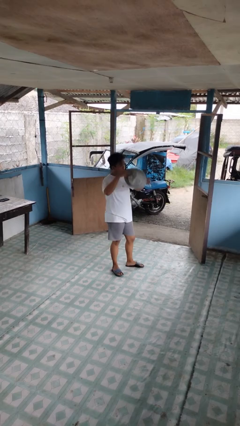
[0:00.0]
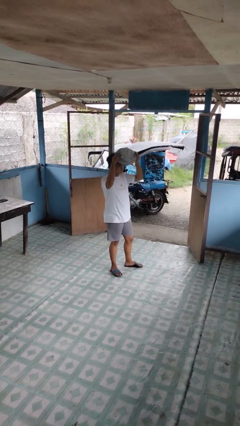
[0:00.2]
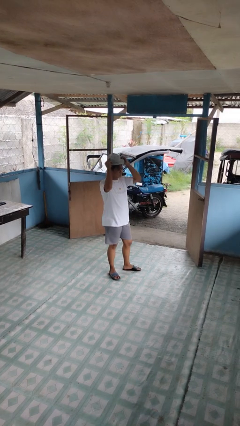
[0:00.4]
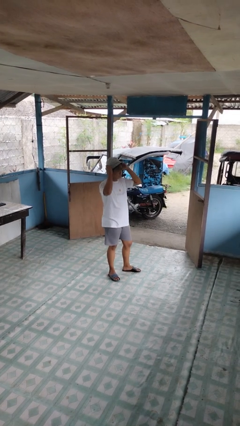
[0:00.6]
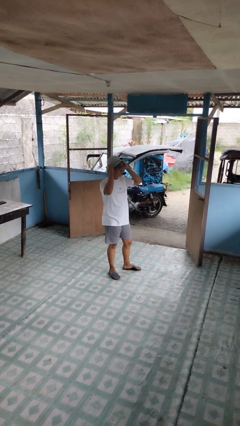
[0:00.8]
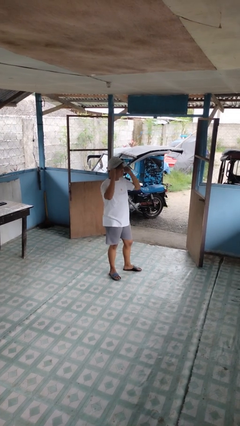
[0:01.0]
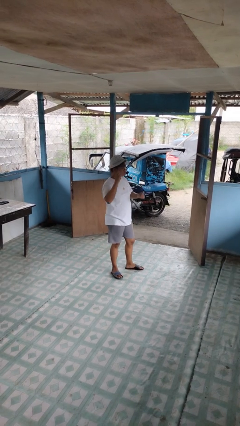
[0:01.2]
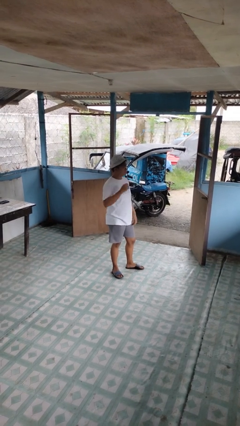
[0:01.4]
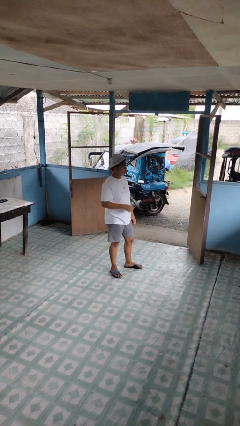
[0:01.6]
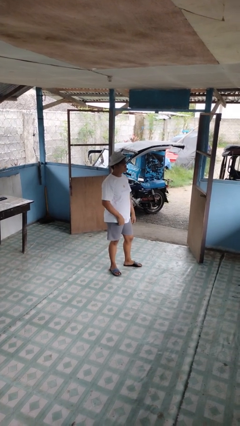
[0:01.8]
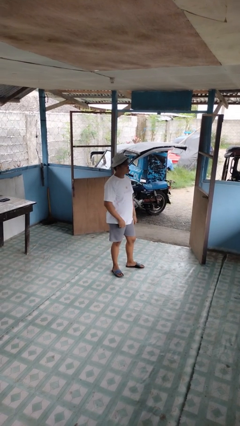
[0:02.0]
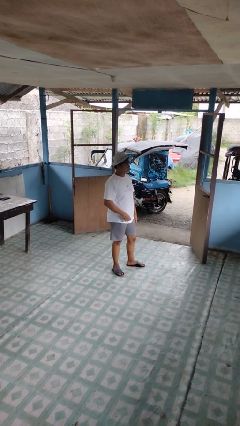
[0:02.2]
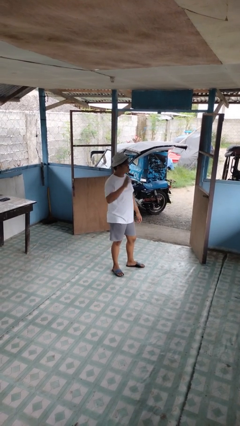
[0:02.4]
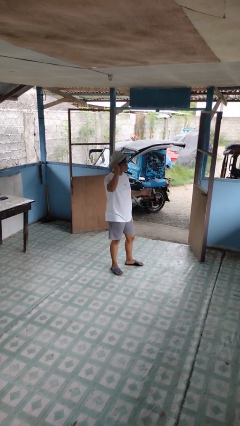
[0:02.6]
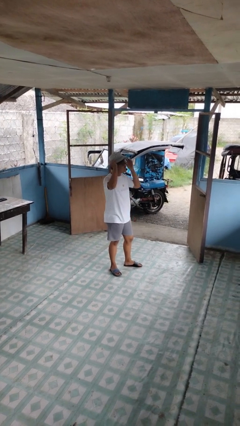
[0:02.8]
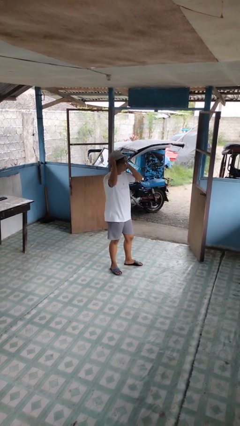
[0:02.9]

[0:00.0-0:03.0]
person puts on hat

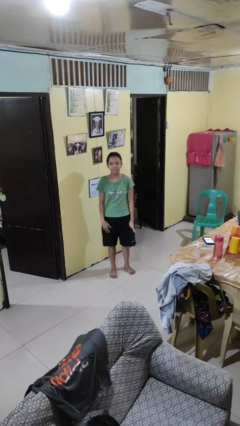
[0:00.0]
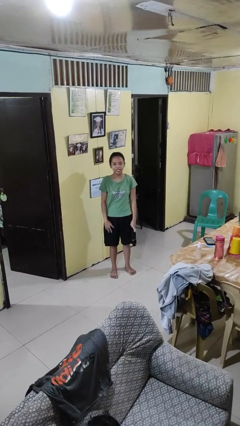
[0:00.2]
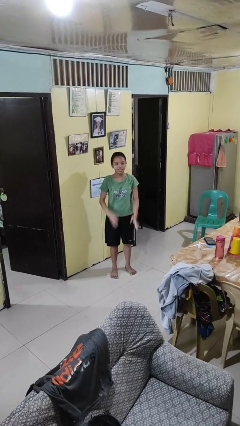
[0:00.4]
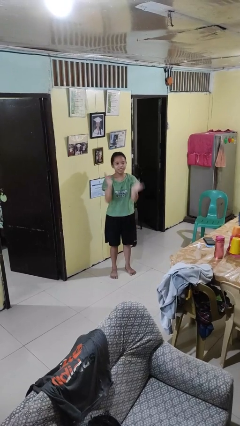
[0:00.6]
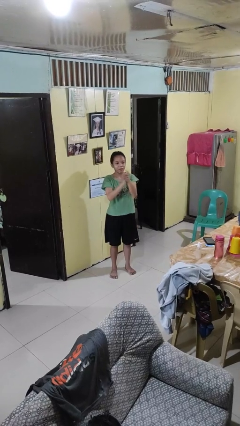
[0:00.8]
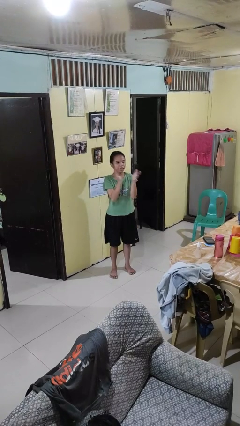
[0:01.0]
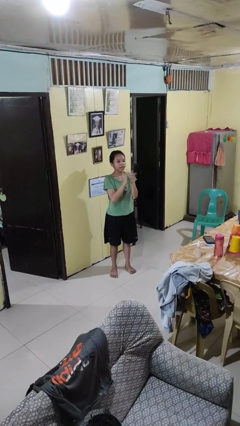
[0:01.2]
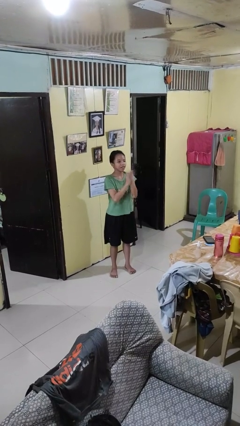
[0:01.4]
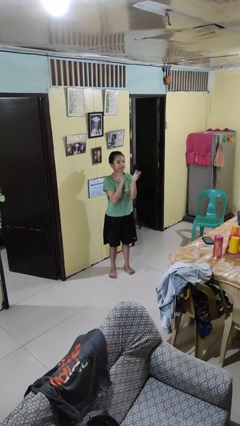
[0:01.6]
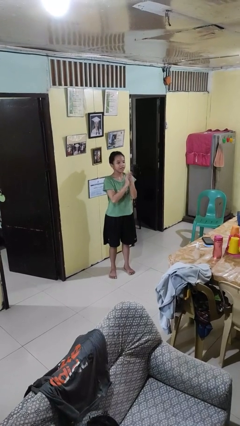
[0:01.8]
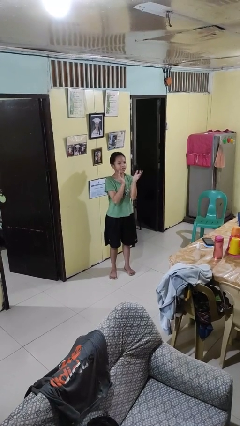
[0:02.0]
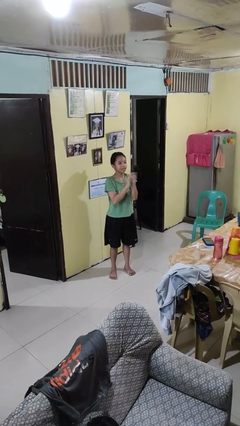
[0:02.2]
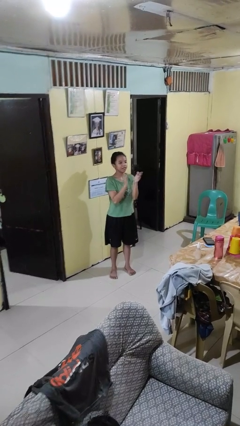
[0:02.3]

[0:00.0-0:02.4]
person claps hands

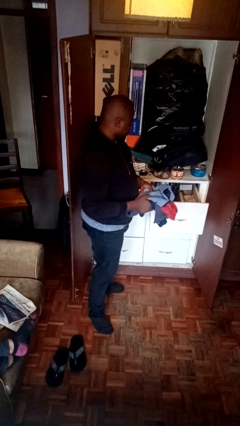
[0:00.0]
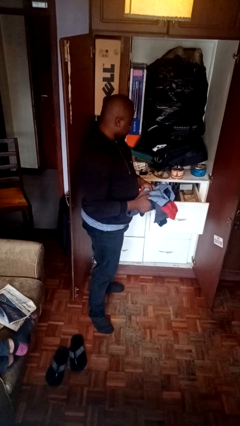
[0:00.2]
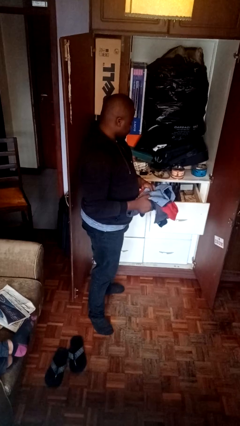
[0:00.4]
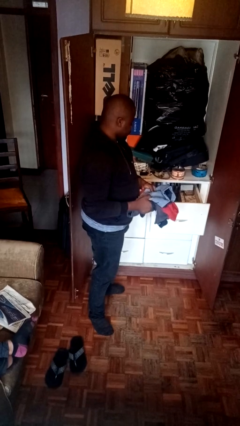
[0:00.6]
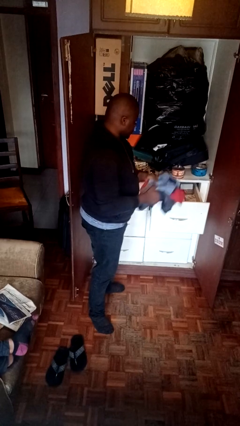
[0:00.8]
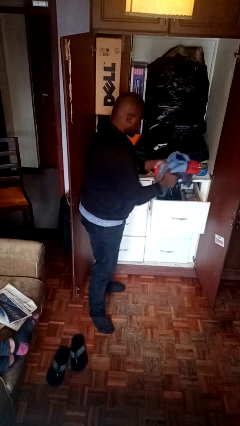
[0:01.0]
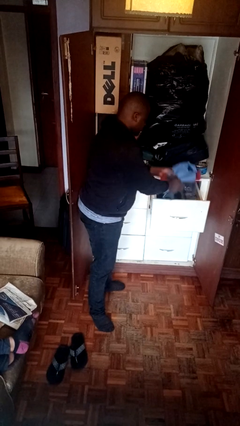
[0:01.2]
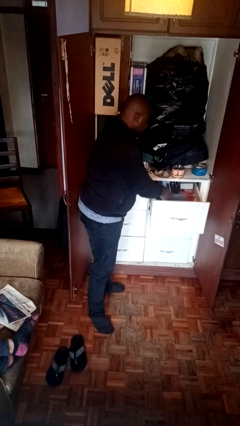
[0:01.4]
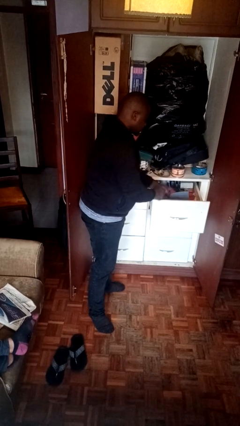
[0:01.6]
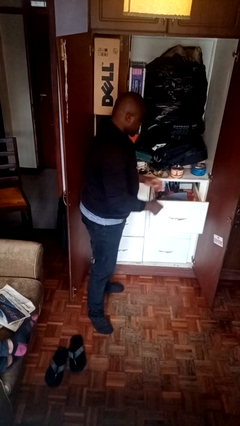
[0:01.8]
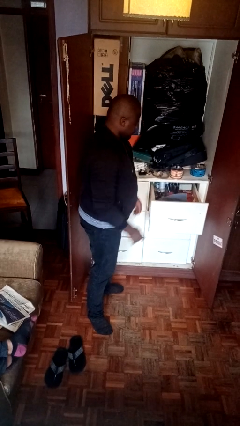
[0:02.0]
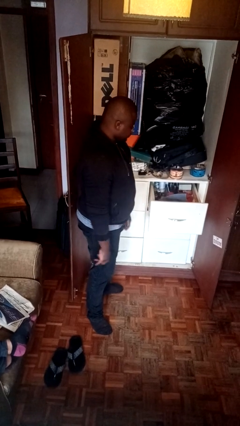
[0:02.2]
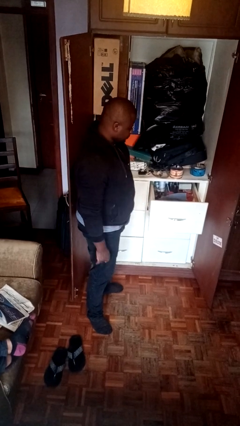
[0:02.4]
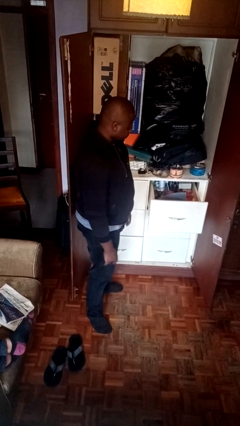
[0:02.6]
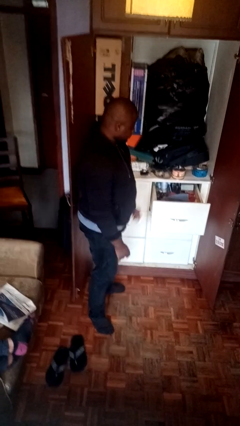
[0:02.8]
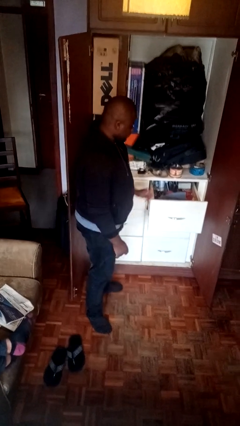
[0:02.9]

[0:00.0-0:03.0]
person puts clothes into dresser

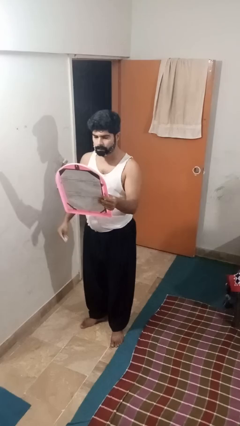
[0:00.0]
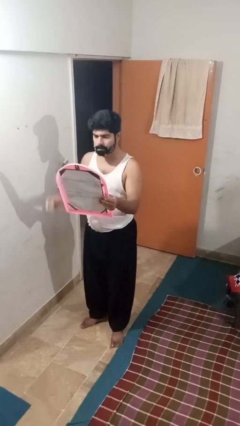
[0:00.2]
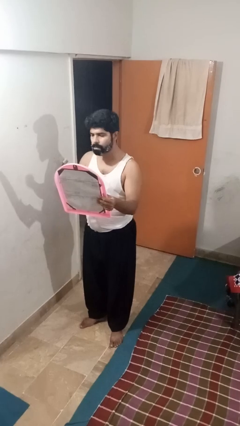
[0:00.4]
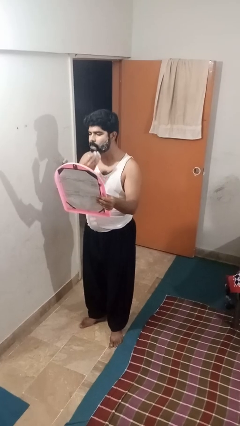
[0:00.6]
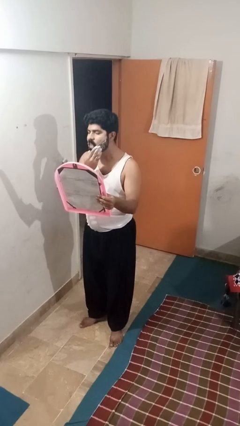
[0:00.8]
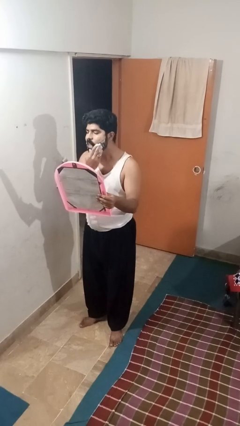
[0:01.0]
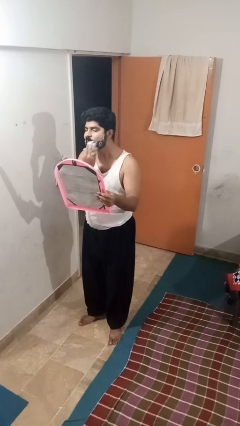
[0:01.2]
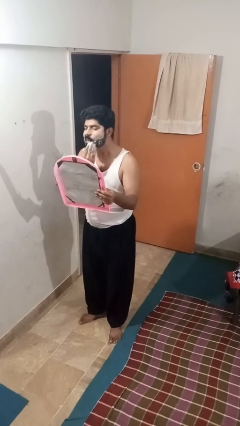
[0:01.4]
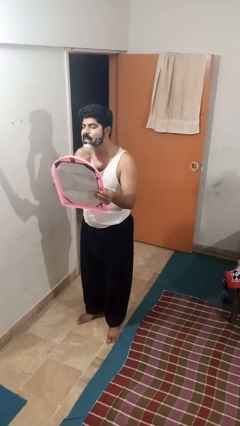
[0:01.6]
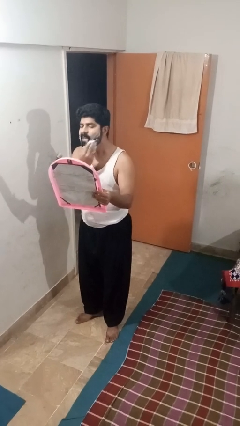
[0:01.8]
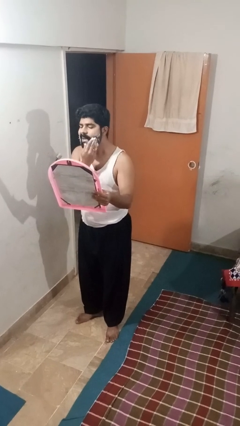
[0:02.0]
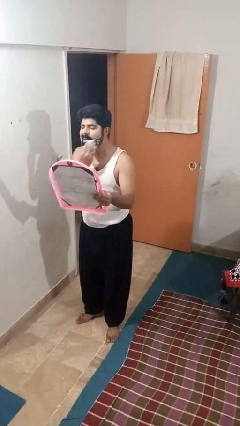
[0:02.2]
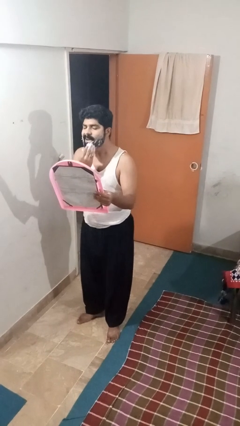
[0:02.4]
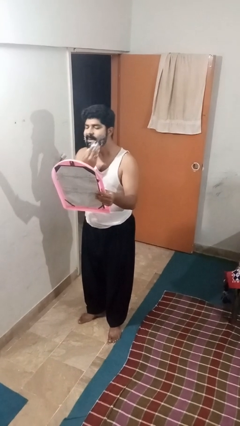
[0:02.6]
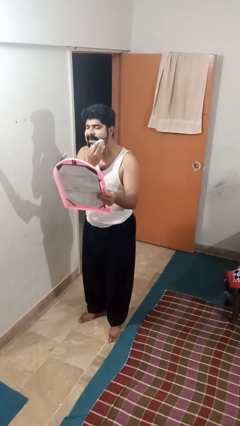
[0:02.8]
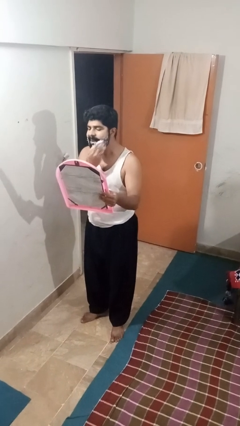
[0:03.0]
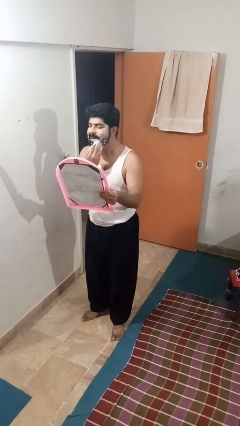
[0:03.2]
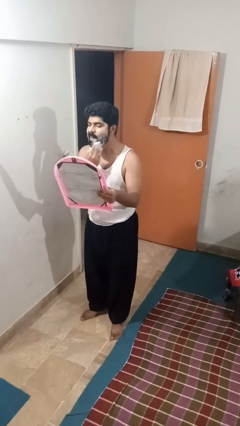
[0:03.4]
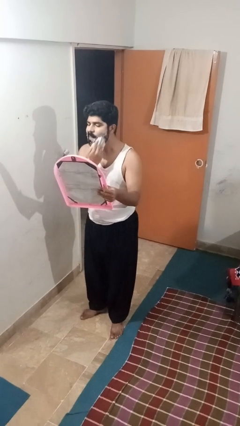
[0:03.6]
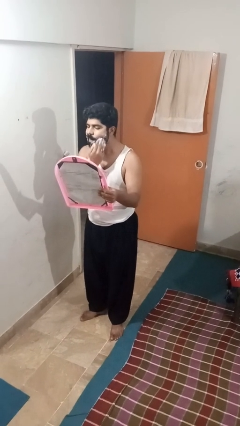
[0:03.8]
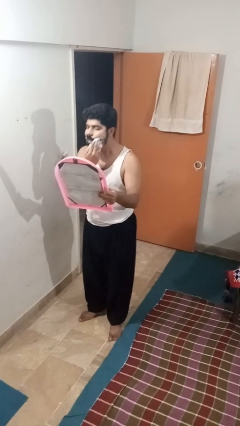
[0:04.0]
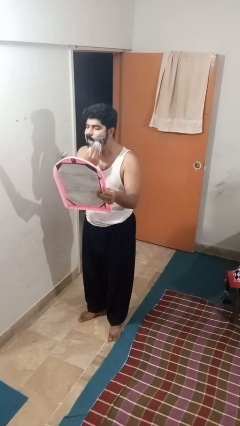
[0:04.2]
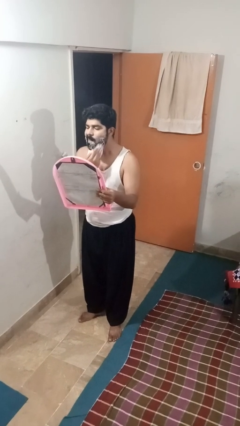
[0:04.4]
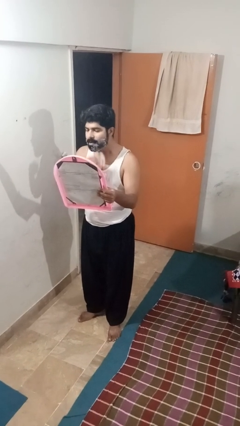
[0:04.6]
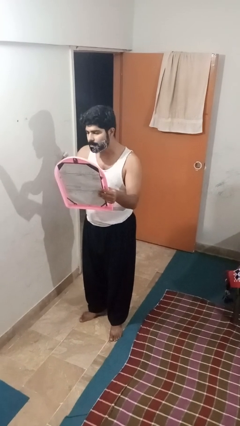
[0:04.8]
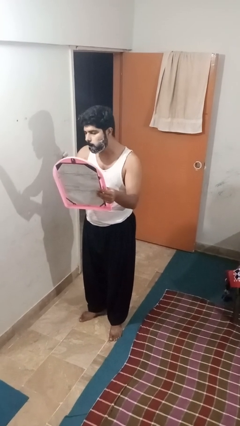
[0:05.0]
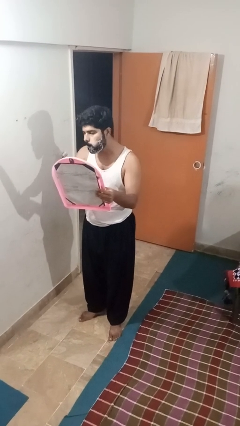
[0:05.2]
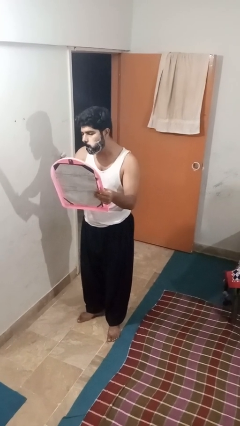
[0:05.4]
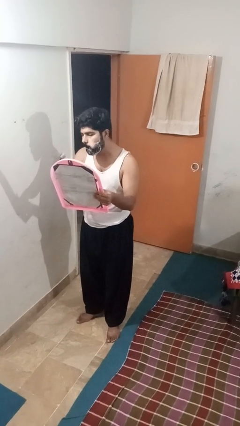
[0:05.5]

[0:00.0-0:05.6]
person applies shaving cream

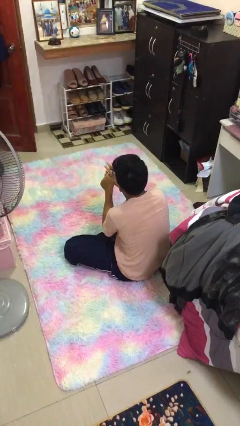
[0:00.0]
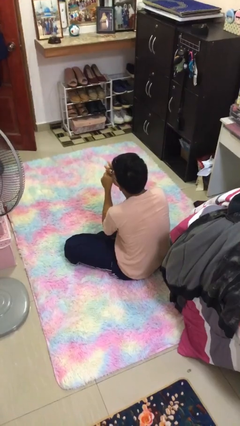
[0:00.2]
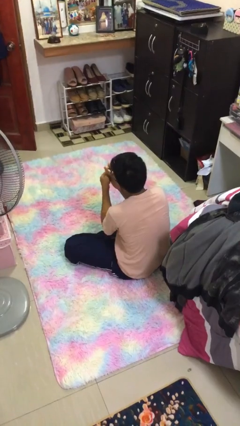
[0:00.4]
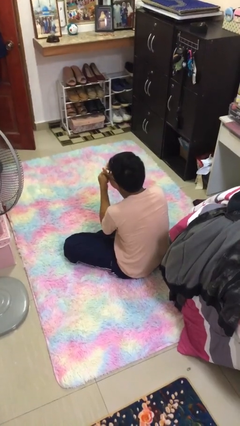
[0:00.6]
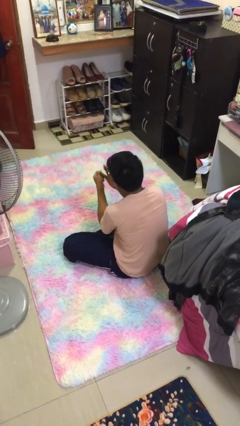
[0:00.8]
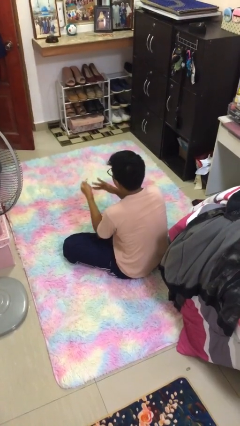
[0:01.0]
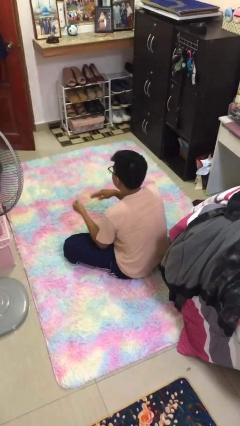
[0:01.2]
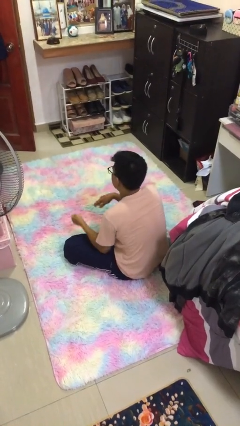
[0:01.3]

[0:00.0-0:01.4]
person takes off ring

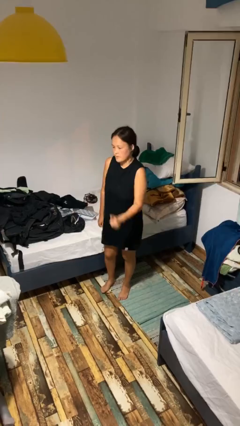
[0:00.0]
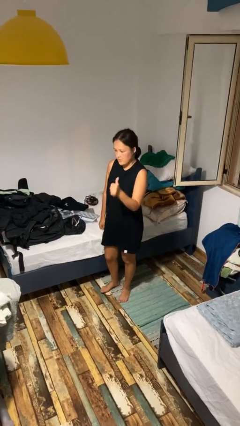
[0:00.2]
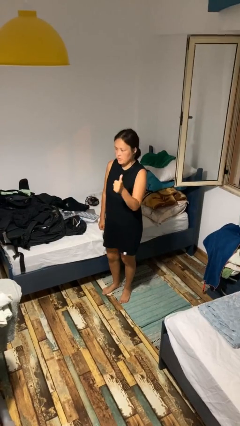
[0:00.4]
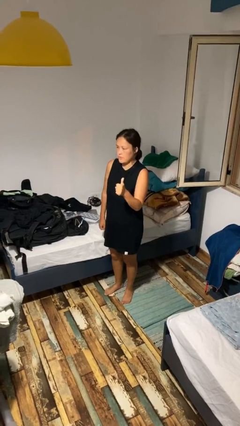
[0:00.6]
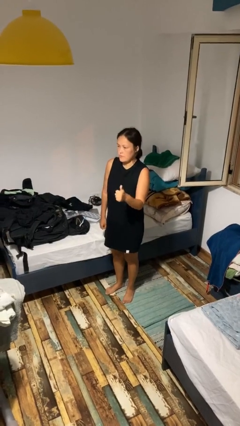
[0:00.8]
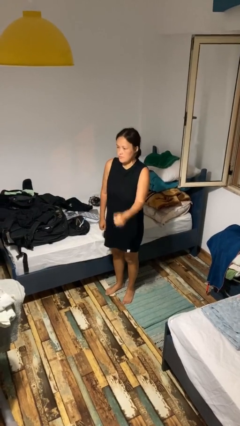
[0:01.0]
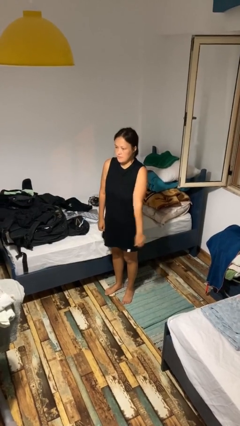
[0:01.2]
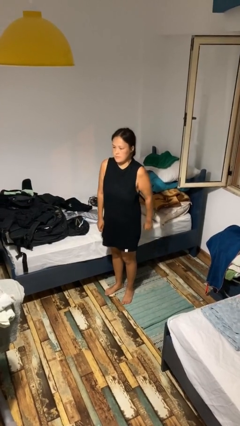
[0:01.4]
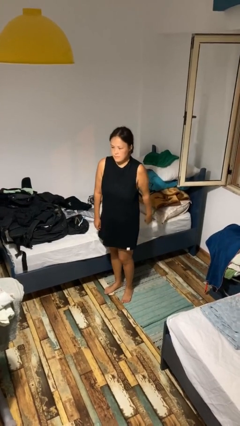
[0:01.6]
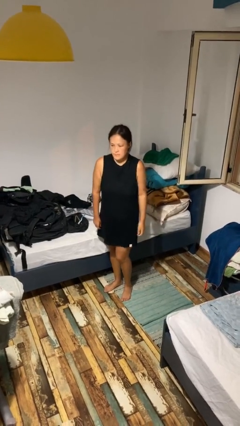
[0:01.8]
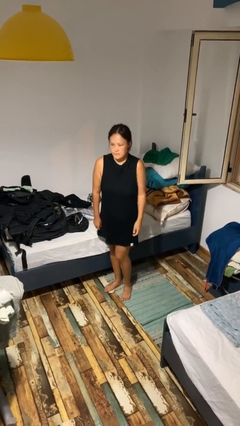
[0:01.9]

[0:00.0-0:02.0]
person gestures thumbs up
